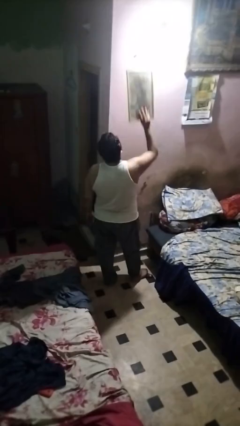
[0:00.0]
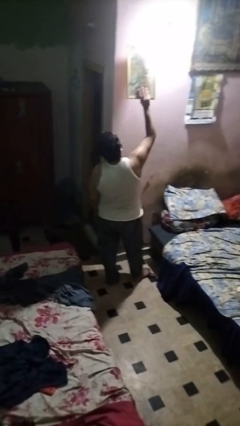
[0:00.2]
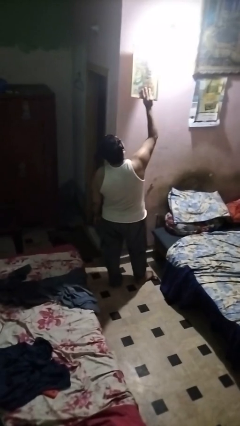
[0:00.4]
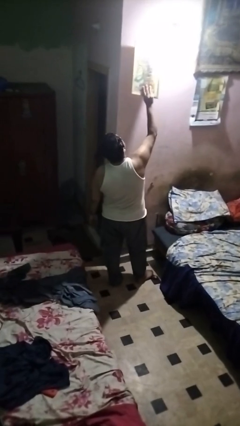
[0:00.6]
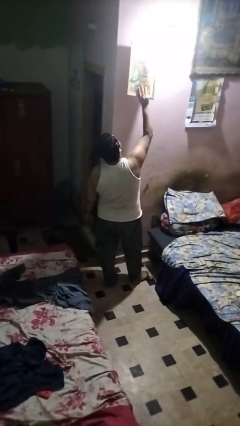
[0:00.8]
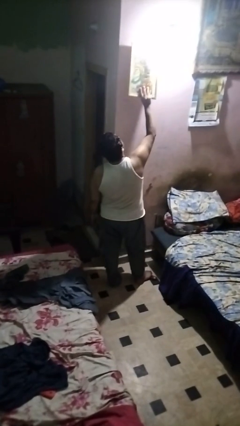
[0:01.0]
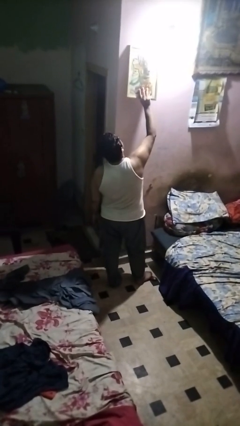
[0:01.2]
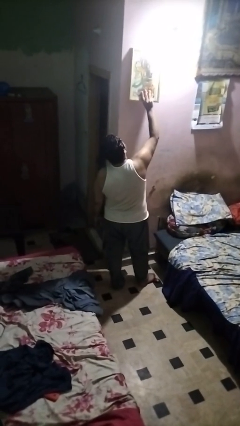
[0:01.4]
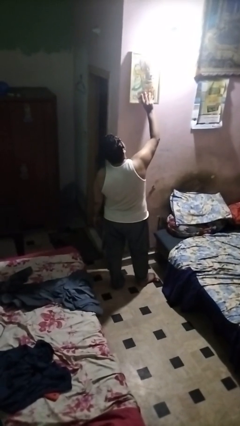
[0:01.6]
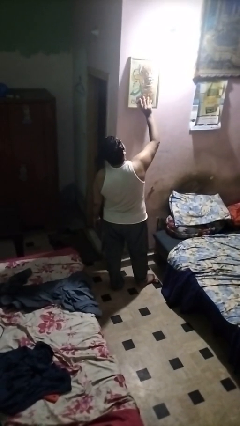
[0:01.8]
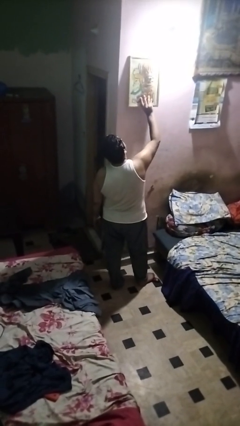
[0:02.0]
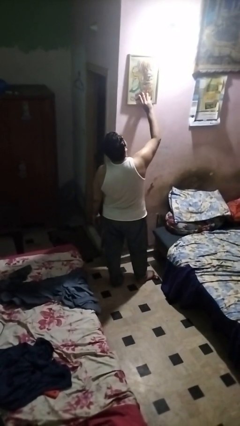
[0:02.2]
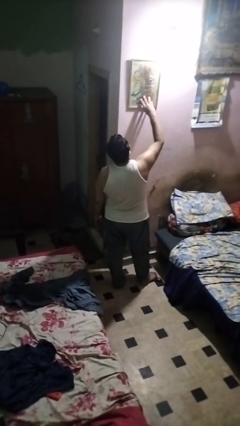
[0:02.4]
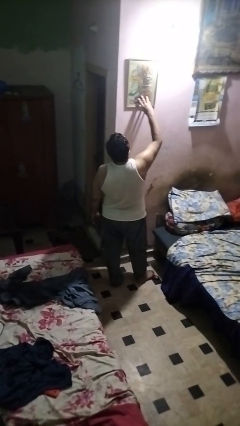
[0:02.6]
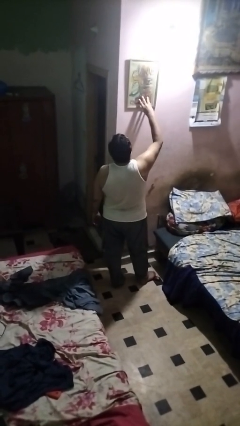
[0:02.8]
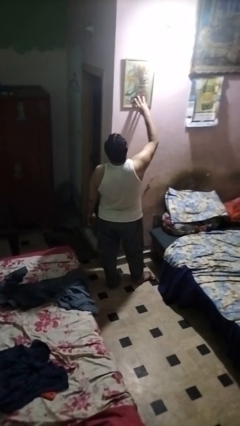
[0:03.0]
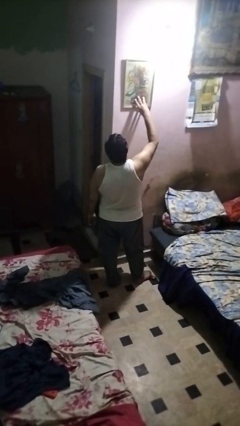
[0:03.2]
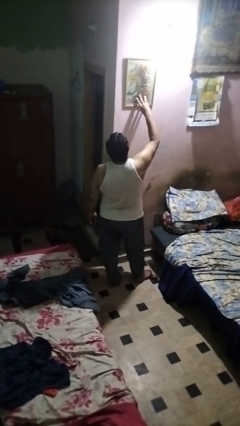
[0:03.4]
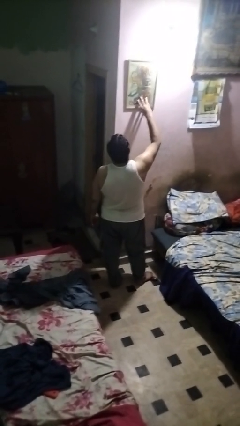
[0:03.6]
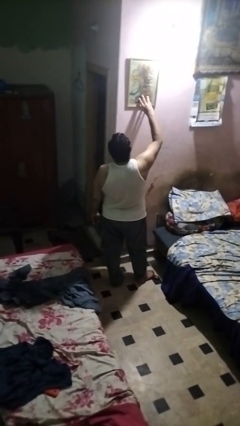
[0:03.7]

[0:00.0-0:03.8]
person puts up picture frame

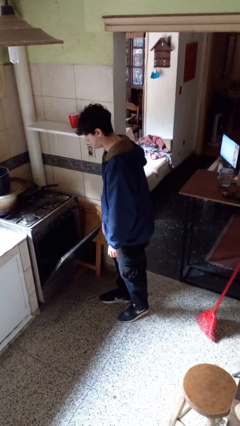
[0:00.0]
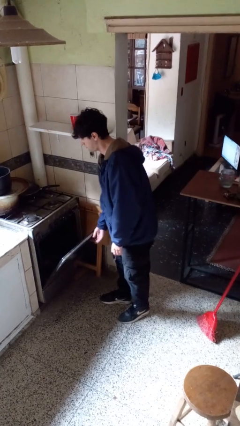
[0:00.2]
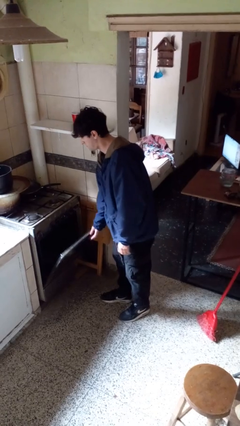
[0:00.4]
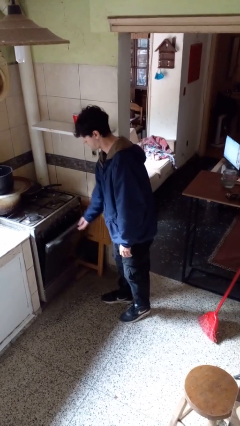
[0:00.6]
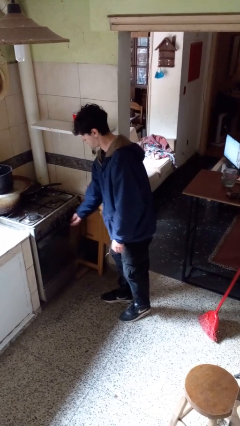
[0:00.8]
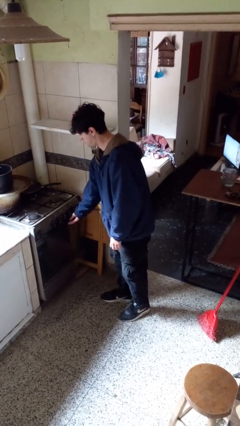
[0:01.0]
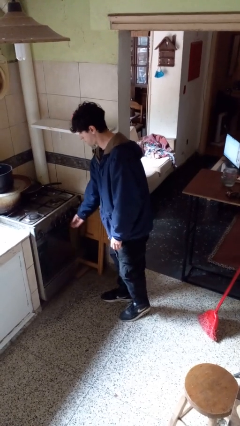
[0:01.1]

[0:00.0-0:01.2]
person closes oven door

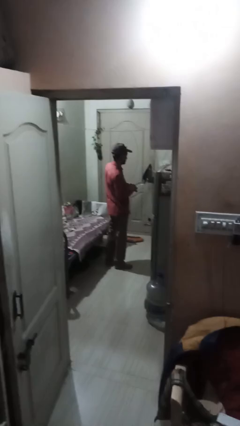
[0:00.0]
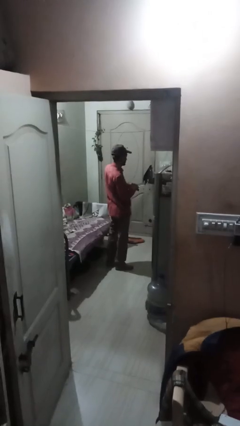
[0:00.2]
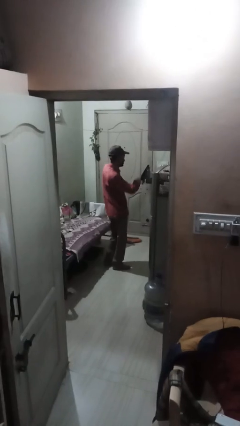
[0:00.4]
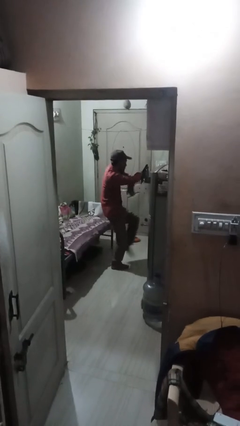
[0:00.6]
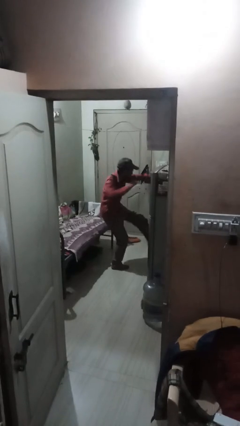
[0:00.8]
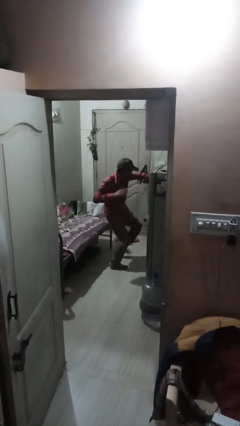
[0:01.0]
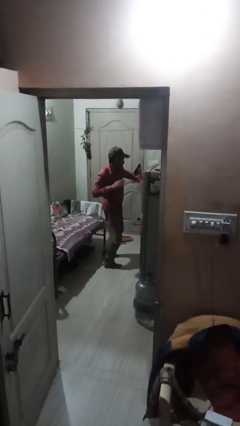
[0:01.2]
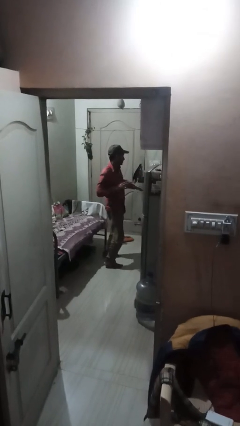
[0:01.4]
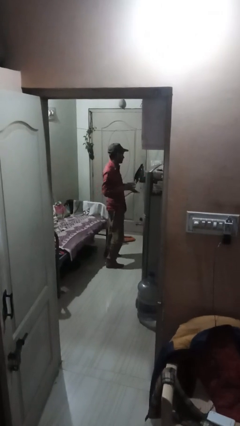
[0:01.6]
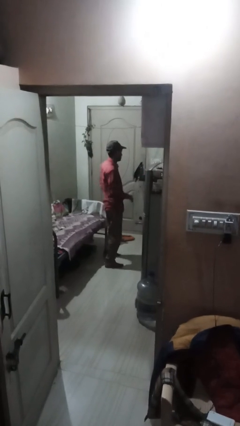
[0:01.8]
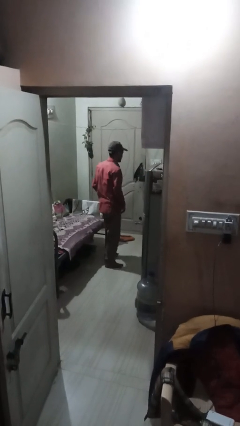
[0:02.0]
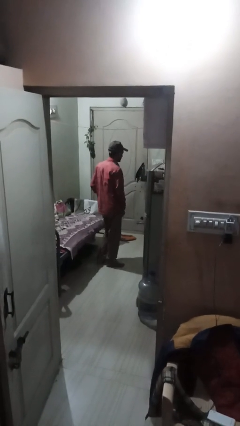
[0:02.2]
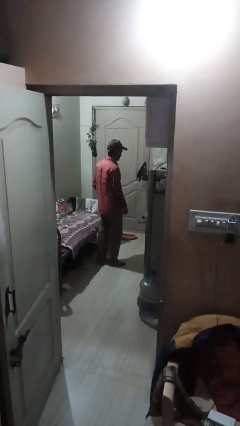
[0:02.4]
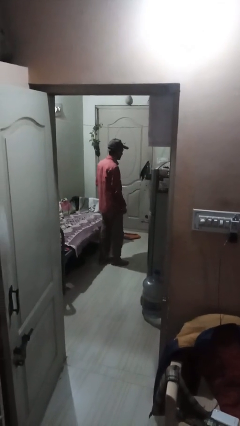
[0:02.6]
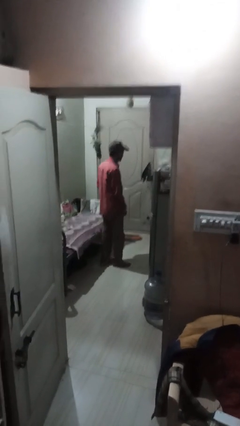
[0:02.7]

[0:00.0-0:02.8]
person karate chop

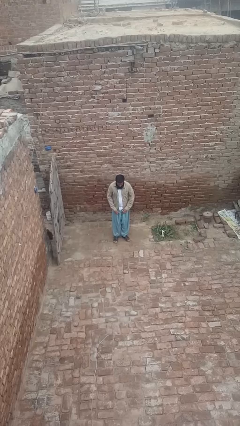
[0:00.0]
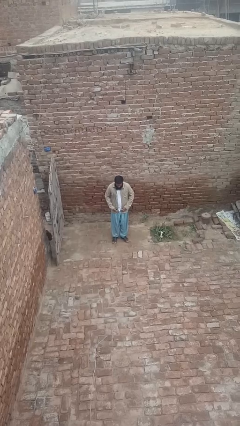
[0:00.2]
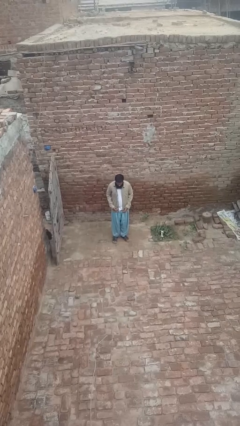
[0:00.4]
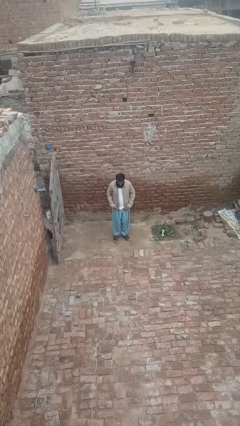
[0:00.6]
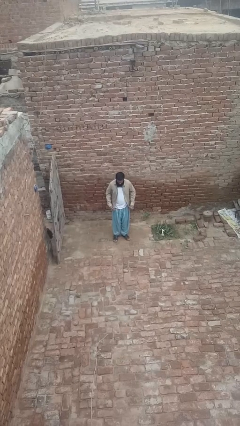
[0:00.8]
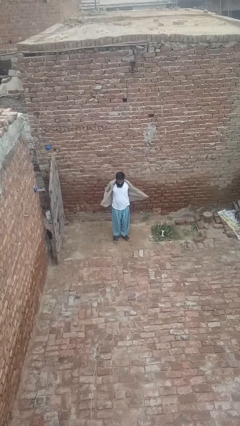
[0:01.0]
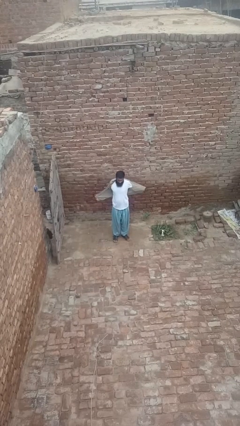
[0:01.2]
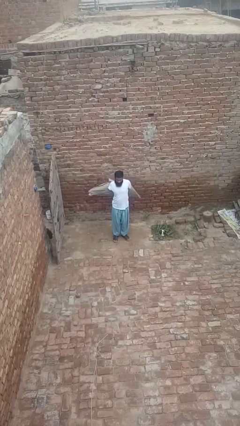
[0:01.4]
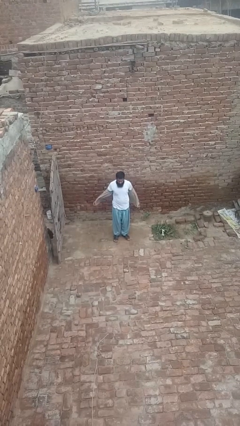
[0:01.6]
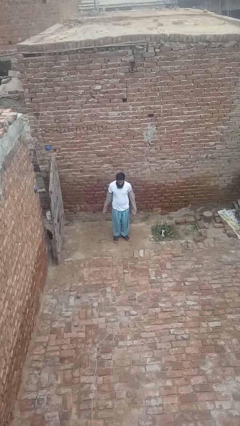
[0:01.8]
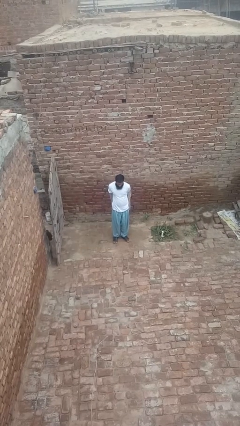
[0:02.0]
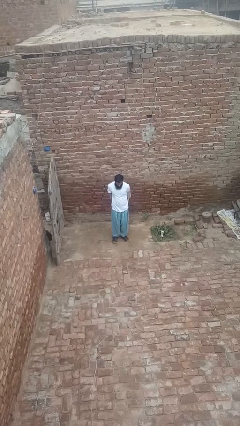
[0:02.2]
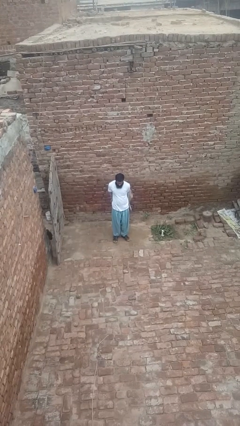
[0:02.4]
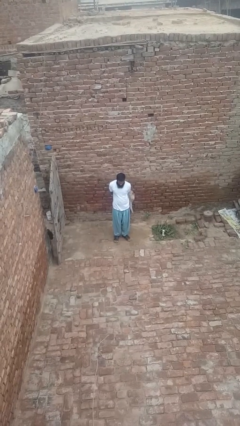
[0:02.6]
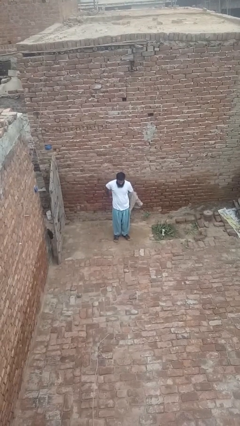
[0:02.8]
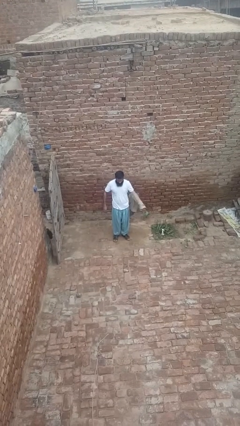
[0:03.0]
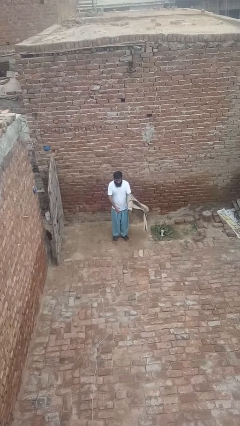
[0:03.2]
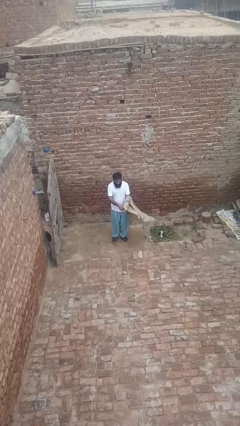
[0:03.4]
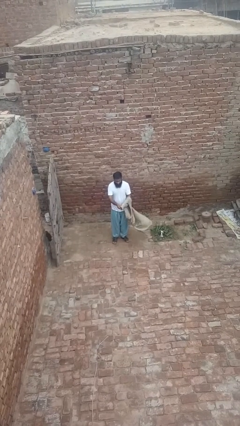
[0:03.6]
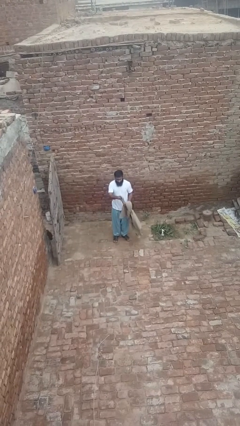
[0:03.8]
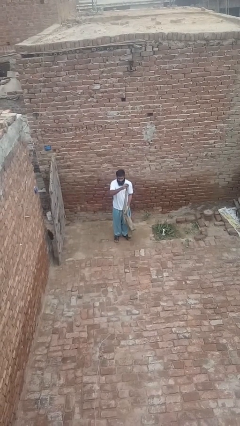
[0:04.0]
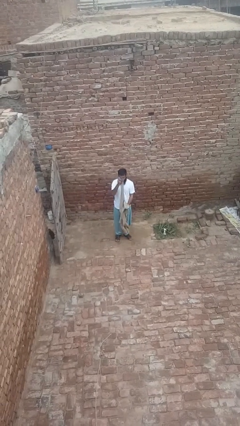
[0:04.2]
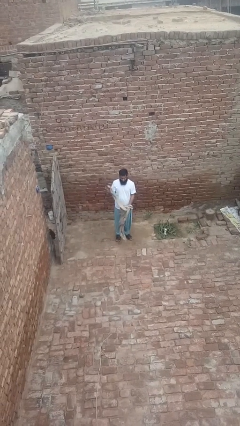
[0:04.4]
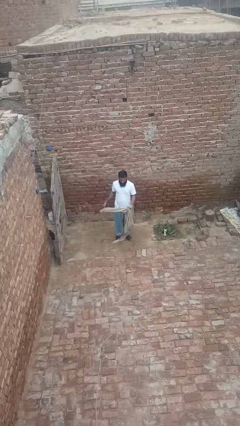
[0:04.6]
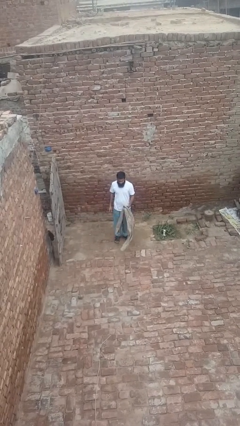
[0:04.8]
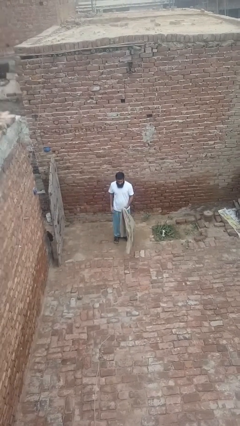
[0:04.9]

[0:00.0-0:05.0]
person takes off shirt

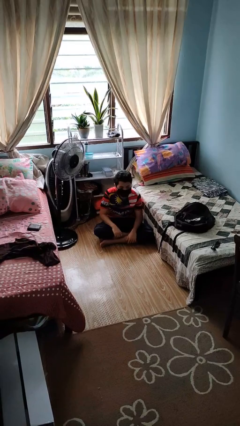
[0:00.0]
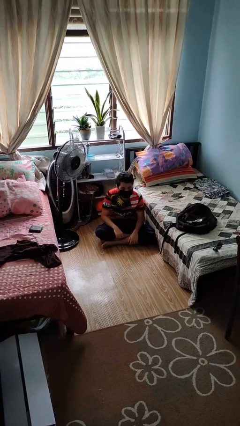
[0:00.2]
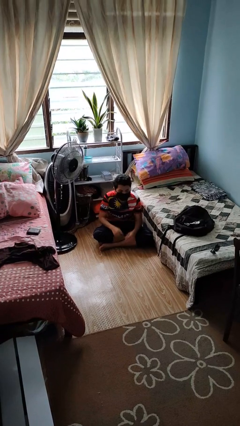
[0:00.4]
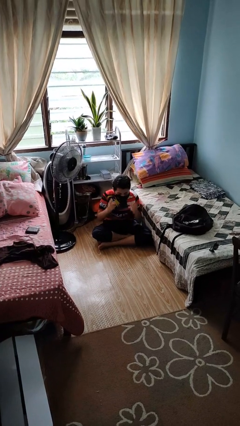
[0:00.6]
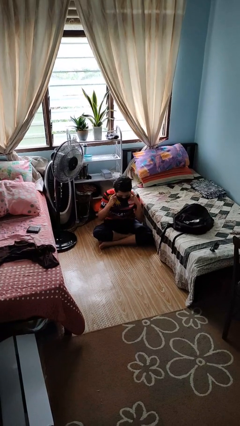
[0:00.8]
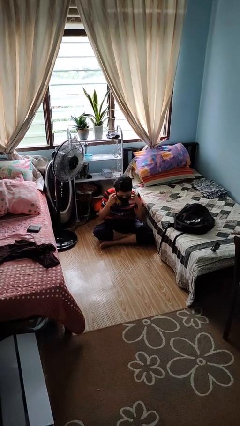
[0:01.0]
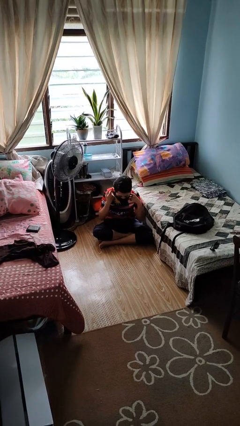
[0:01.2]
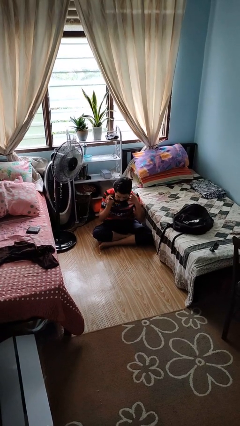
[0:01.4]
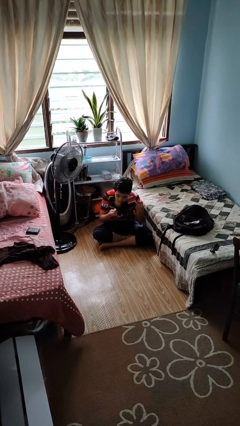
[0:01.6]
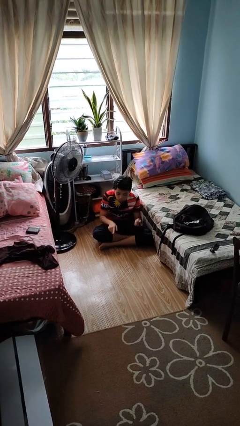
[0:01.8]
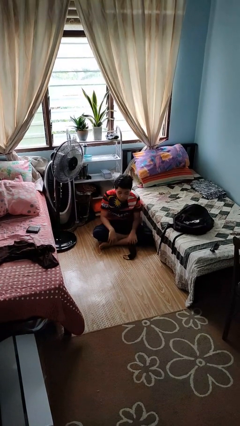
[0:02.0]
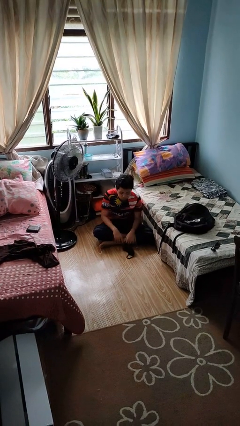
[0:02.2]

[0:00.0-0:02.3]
person takes off facemask

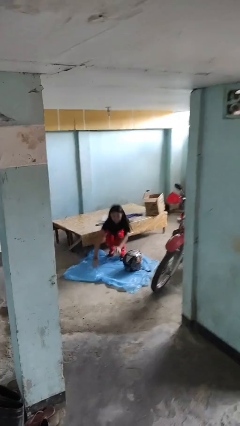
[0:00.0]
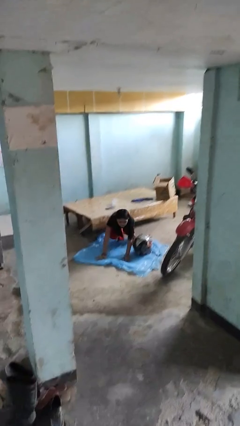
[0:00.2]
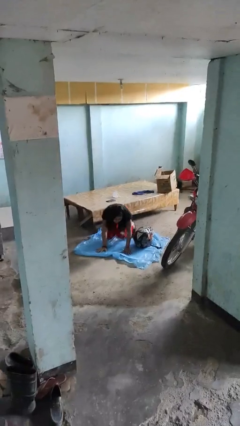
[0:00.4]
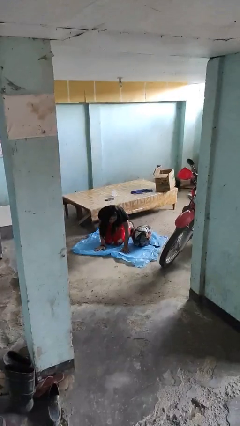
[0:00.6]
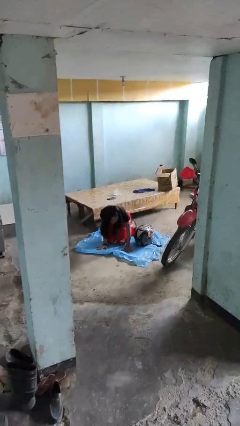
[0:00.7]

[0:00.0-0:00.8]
person trips on object on floor

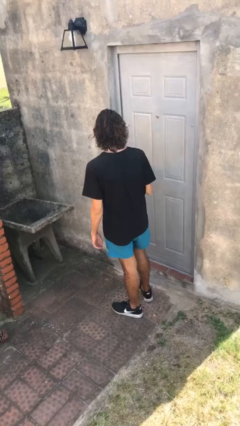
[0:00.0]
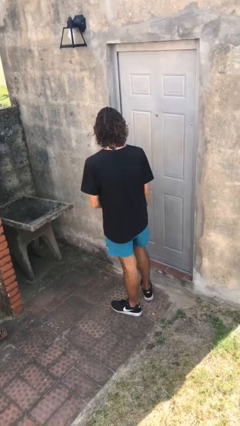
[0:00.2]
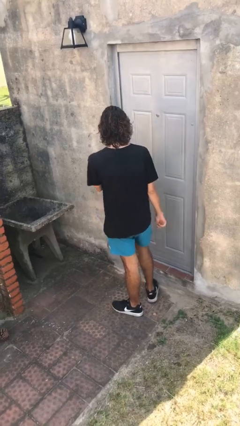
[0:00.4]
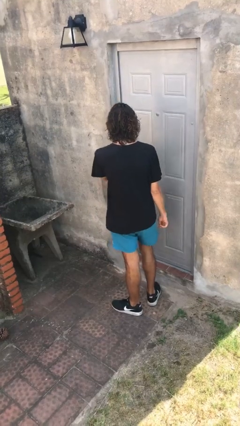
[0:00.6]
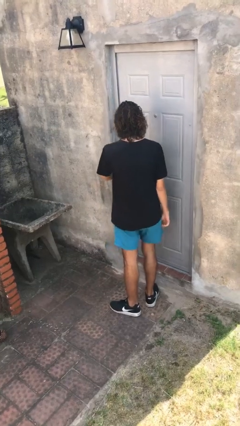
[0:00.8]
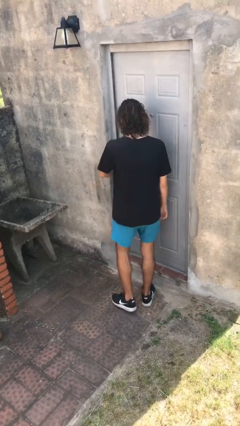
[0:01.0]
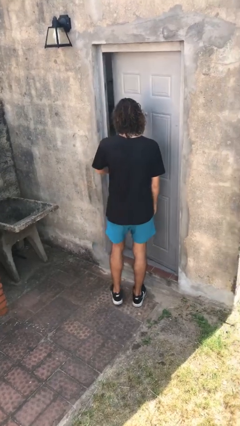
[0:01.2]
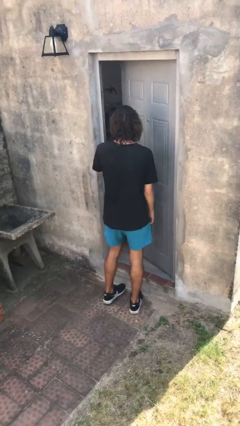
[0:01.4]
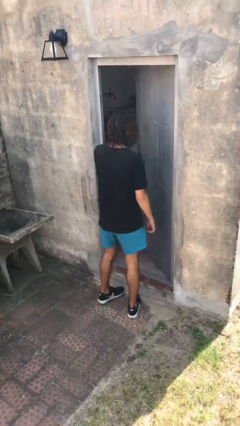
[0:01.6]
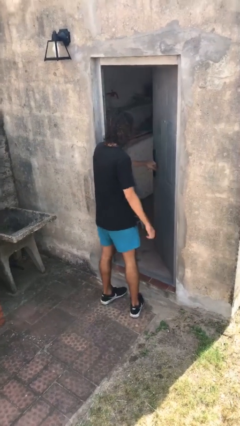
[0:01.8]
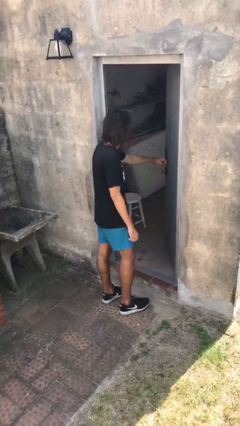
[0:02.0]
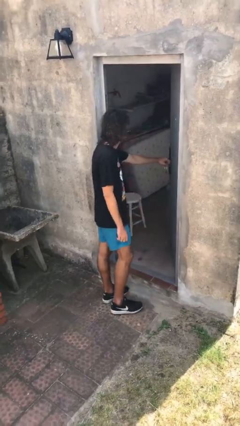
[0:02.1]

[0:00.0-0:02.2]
person opens facility door
